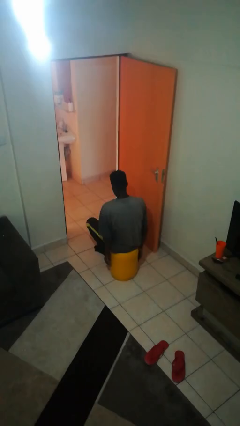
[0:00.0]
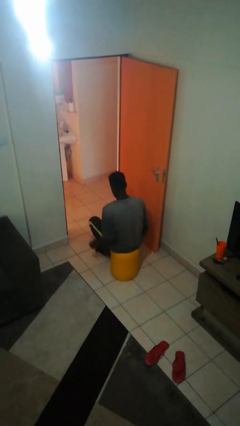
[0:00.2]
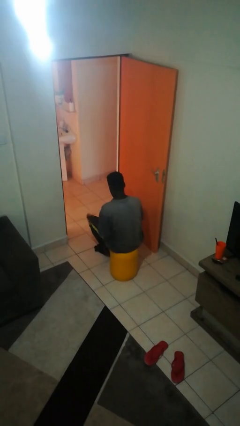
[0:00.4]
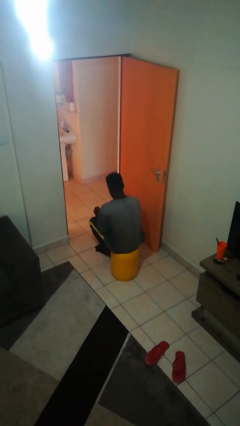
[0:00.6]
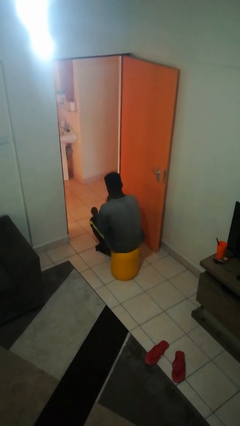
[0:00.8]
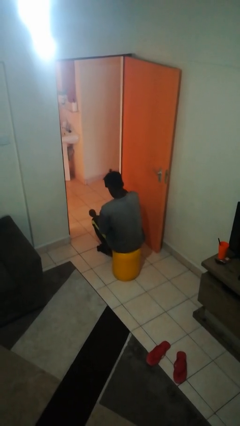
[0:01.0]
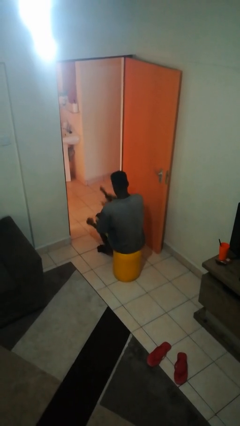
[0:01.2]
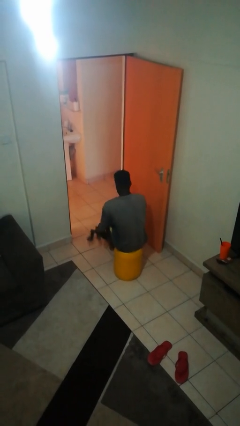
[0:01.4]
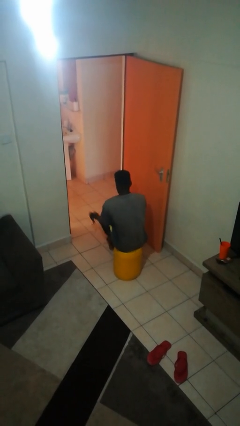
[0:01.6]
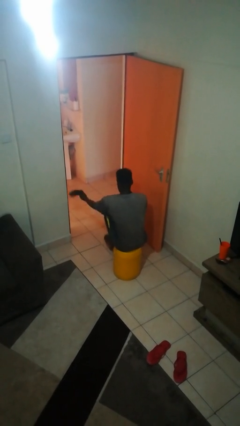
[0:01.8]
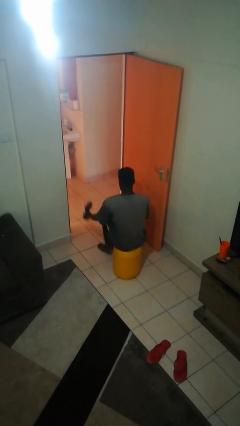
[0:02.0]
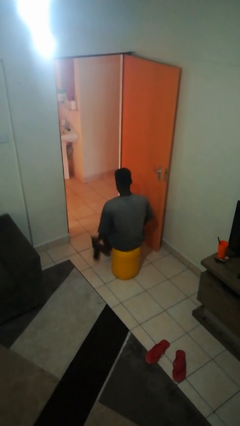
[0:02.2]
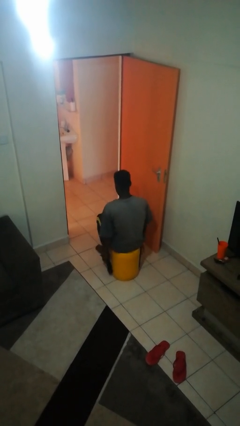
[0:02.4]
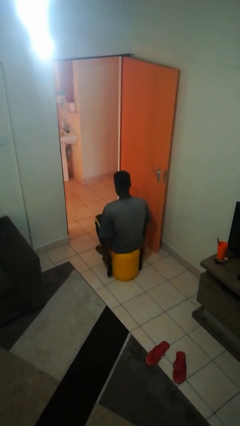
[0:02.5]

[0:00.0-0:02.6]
person takes off socks

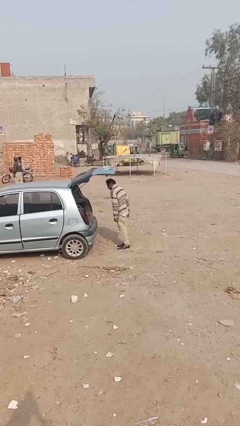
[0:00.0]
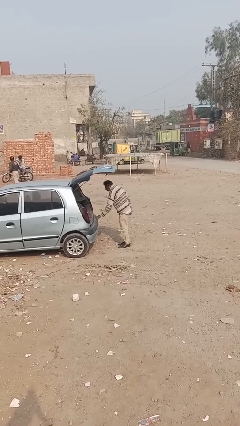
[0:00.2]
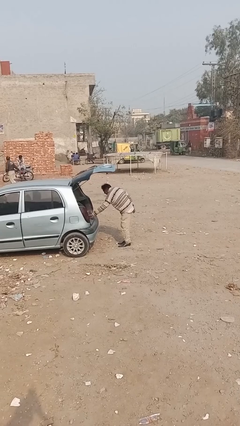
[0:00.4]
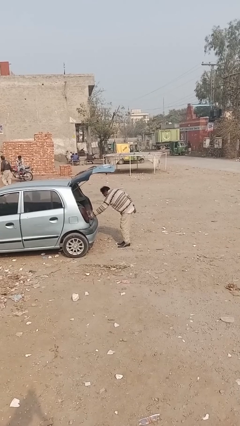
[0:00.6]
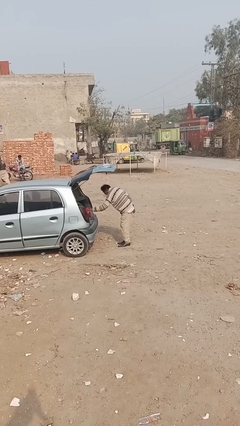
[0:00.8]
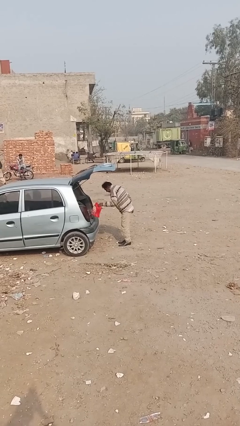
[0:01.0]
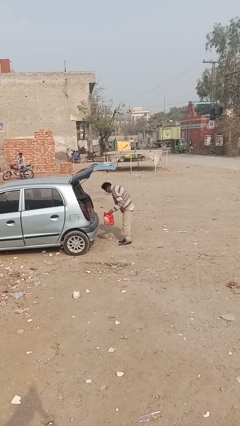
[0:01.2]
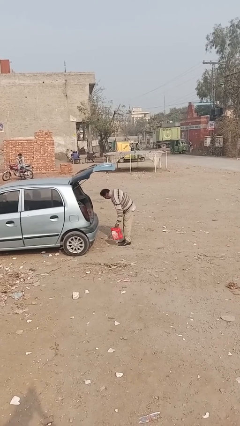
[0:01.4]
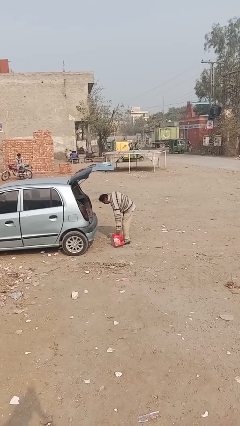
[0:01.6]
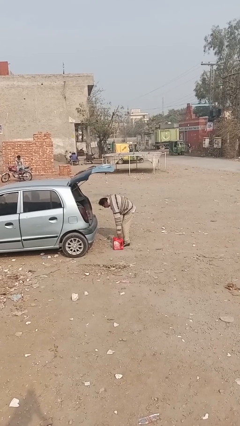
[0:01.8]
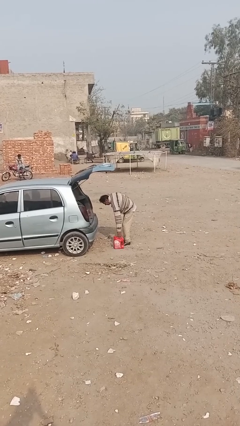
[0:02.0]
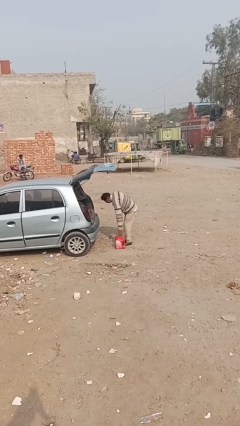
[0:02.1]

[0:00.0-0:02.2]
person unloads car

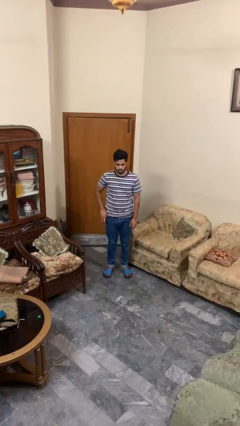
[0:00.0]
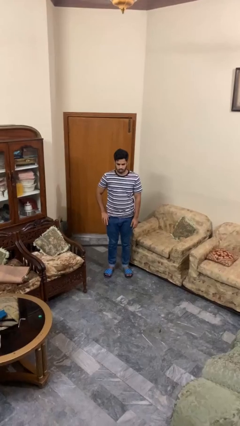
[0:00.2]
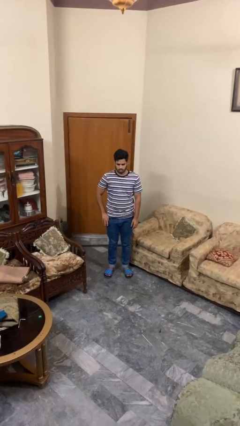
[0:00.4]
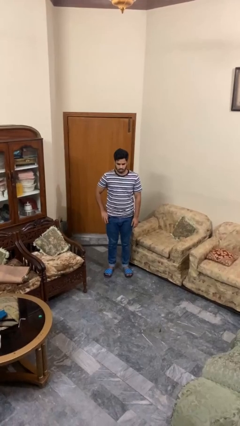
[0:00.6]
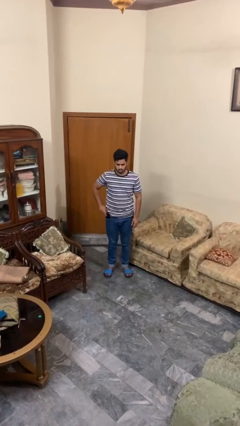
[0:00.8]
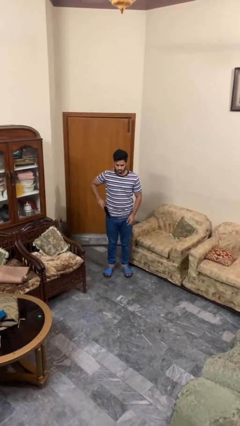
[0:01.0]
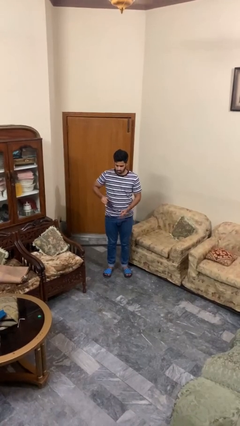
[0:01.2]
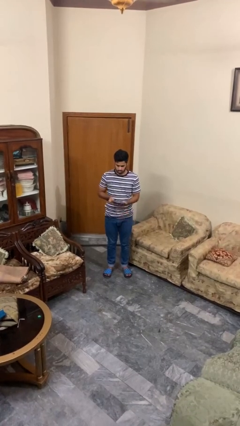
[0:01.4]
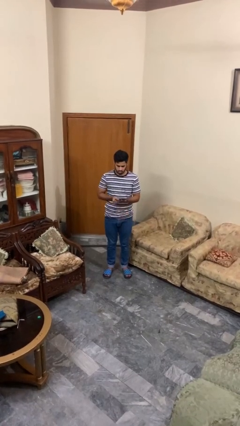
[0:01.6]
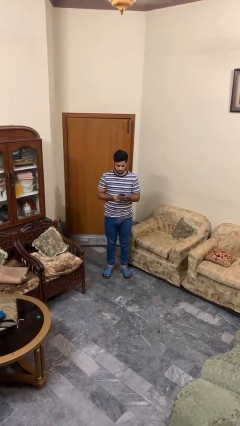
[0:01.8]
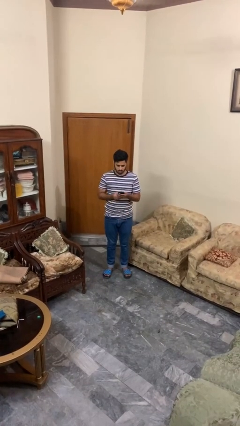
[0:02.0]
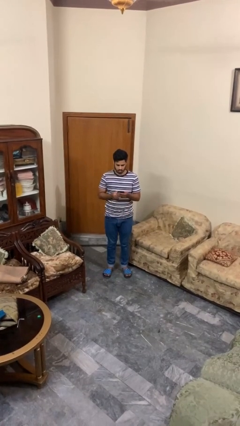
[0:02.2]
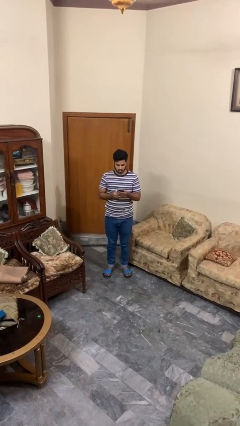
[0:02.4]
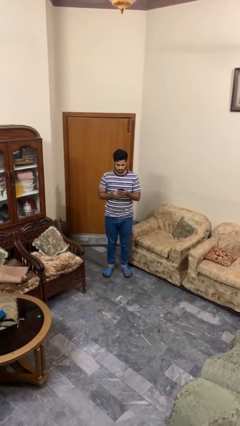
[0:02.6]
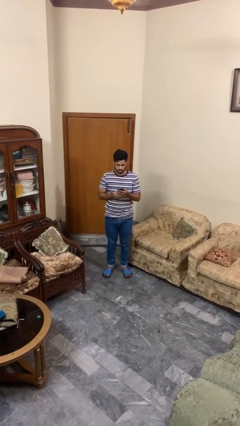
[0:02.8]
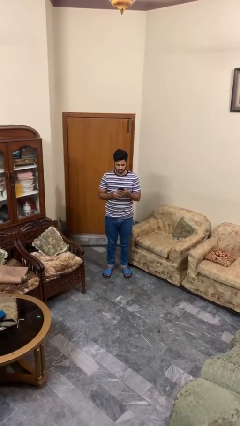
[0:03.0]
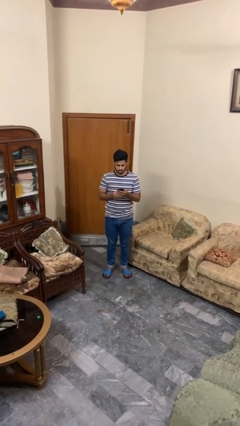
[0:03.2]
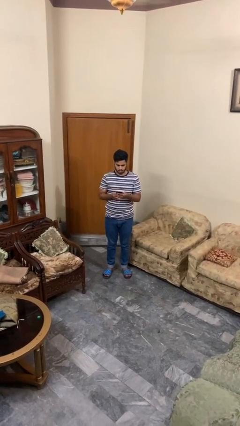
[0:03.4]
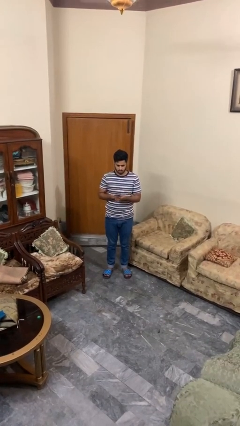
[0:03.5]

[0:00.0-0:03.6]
person takes phone from pocket

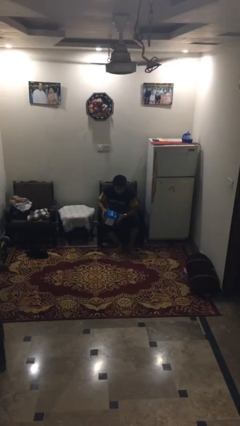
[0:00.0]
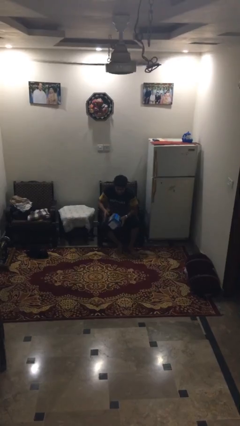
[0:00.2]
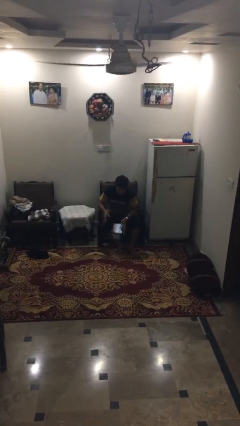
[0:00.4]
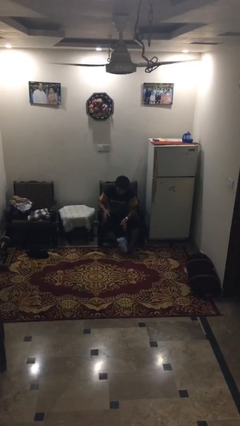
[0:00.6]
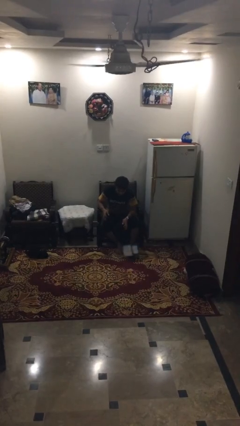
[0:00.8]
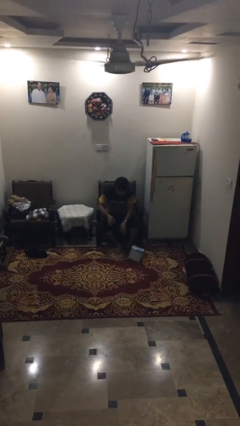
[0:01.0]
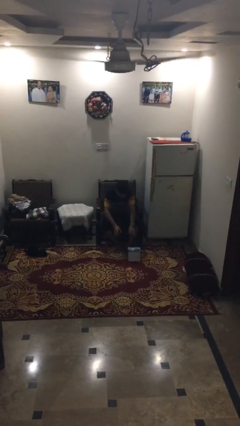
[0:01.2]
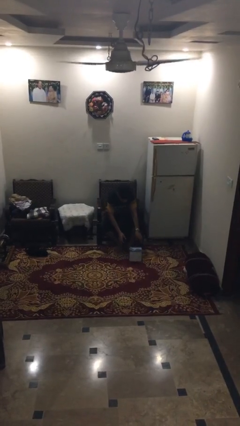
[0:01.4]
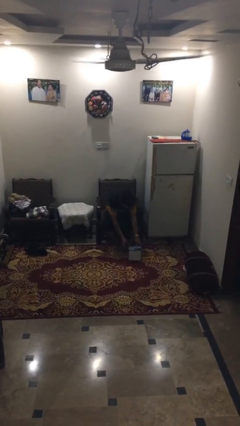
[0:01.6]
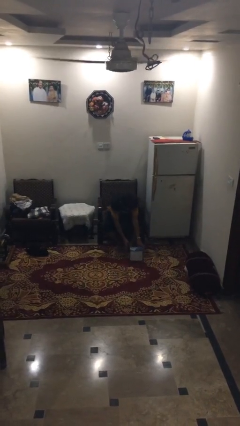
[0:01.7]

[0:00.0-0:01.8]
person drops object

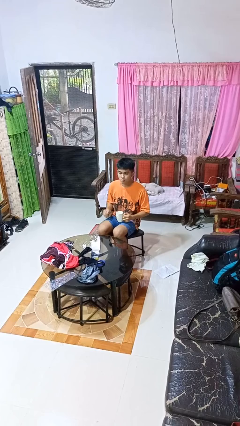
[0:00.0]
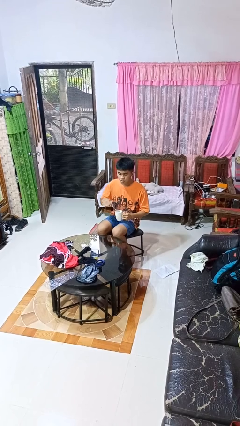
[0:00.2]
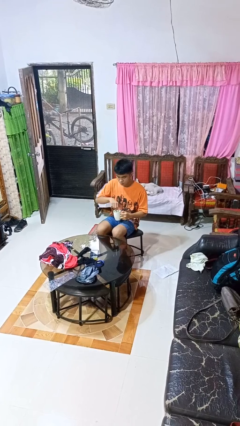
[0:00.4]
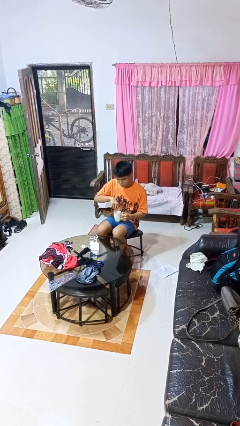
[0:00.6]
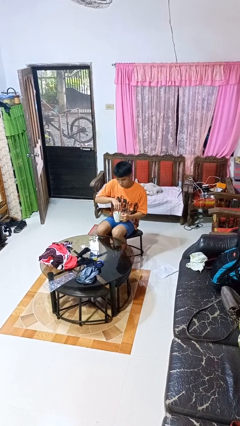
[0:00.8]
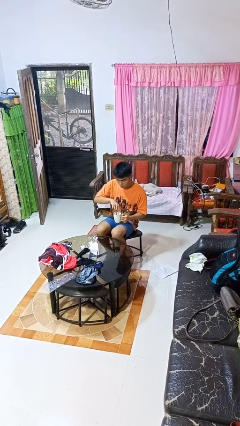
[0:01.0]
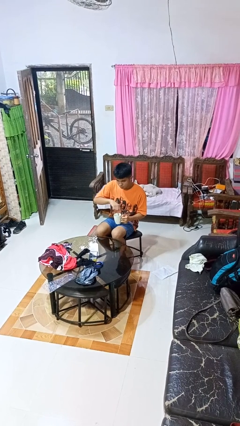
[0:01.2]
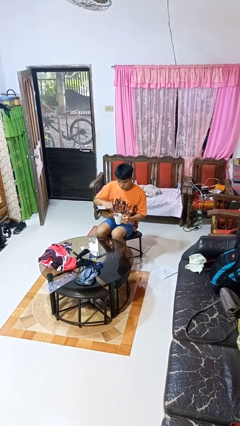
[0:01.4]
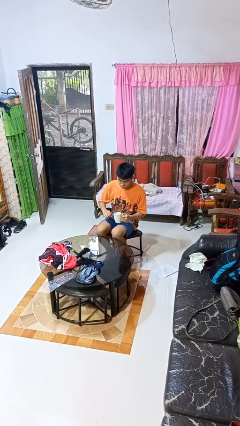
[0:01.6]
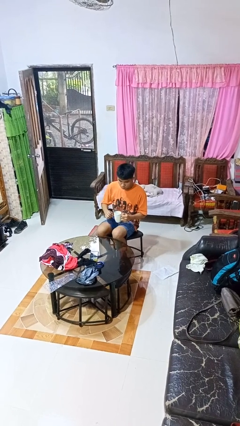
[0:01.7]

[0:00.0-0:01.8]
person stirs mug

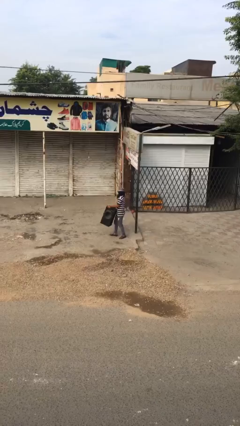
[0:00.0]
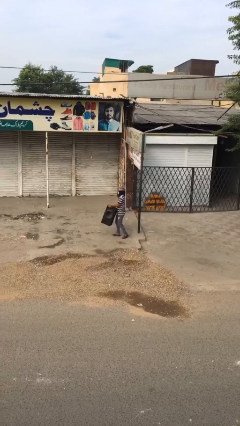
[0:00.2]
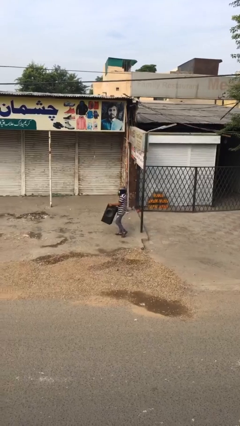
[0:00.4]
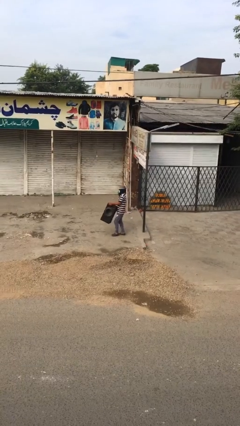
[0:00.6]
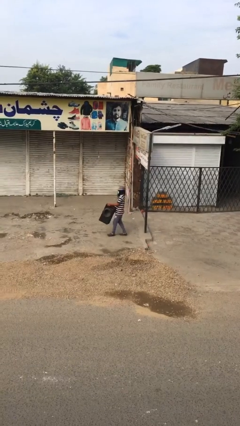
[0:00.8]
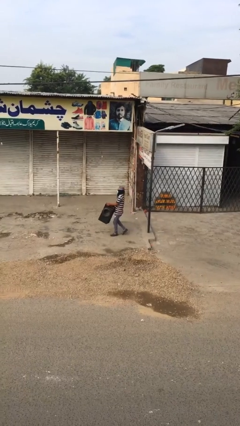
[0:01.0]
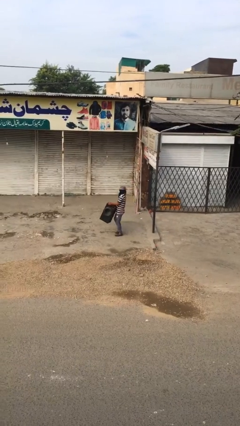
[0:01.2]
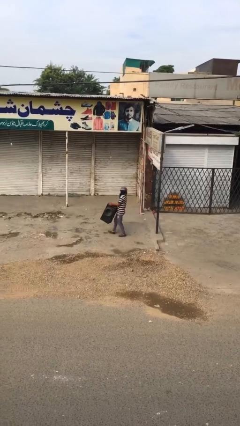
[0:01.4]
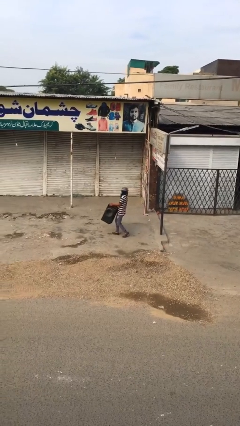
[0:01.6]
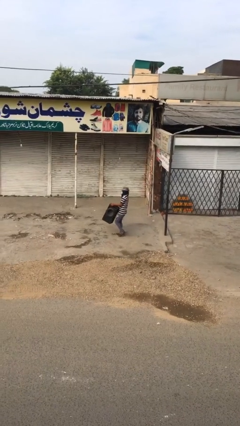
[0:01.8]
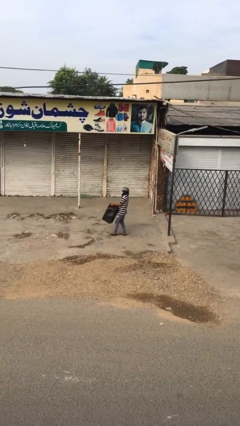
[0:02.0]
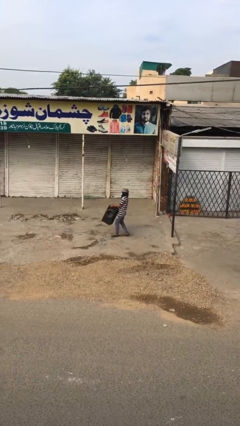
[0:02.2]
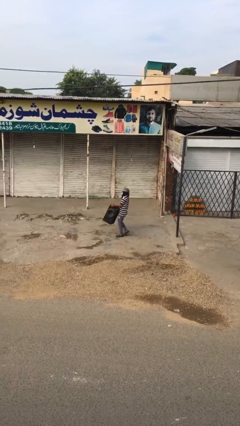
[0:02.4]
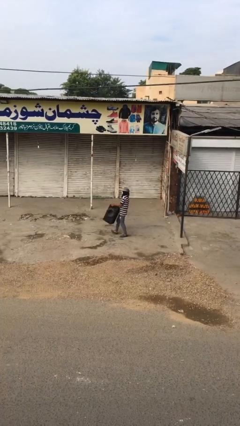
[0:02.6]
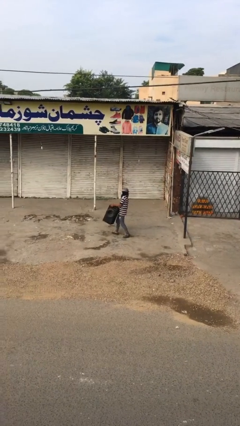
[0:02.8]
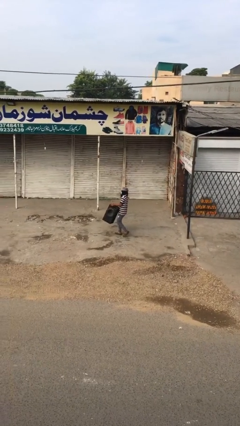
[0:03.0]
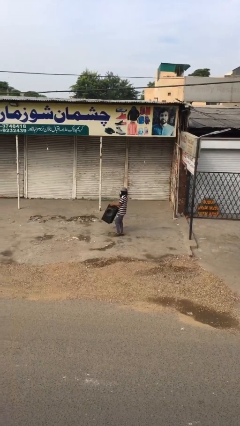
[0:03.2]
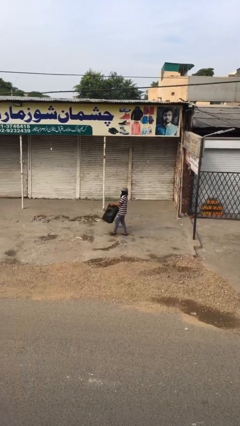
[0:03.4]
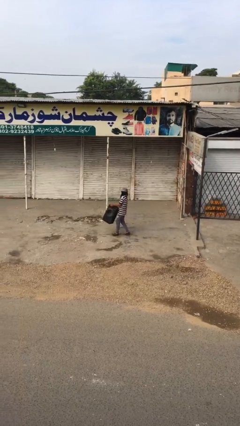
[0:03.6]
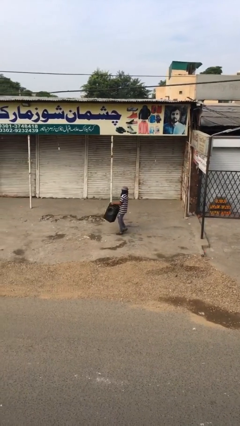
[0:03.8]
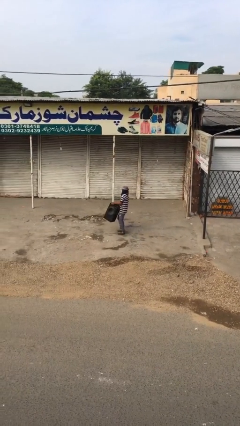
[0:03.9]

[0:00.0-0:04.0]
person carries heavy object

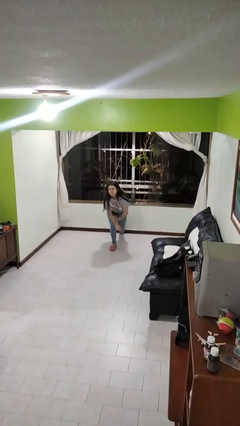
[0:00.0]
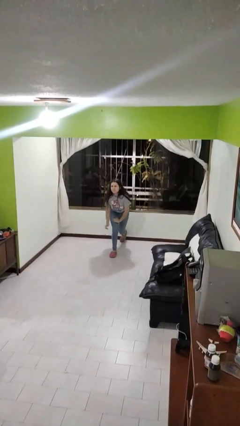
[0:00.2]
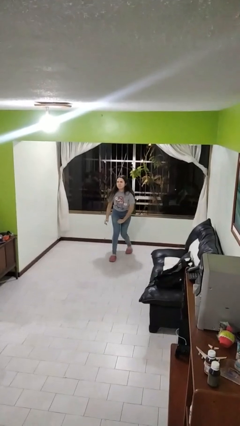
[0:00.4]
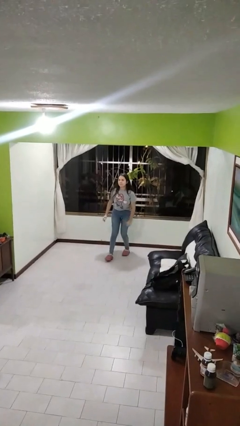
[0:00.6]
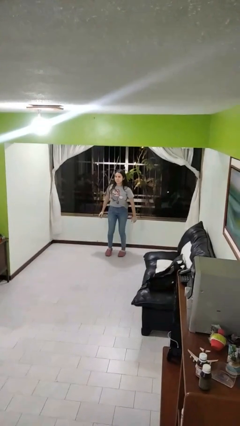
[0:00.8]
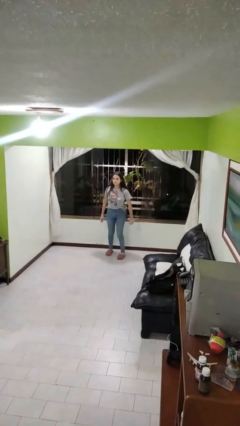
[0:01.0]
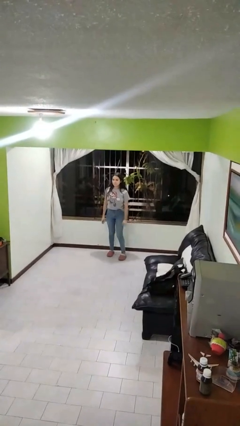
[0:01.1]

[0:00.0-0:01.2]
person stands up from floor

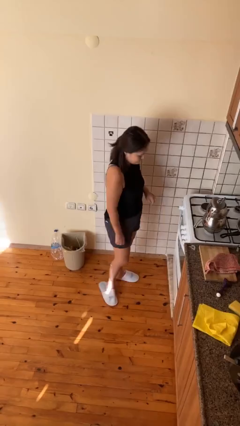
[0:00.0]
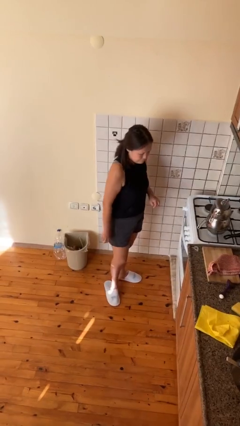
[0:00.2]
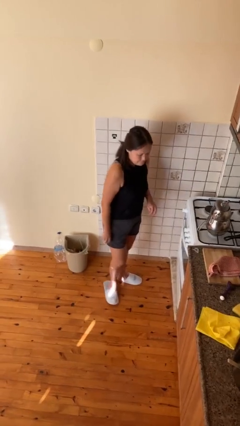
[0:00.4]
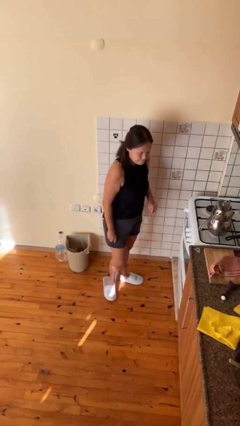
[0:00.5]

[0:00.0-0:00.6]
person opens oven door
